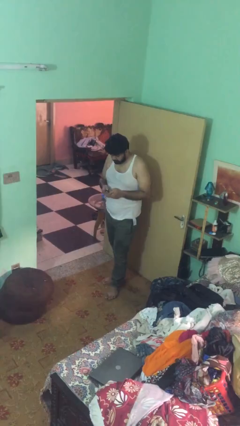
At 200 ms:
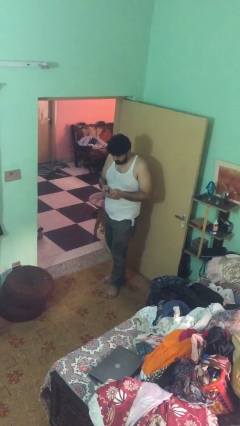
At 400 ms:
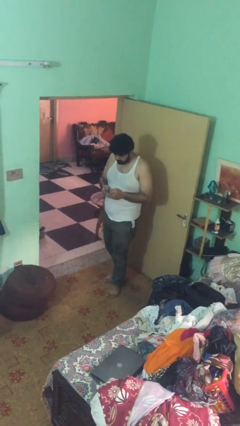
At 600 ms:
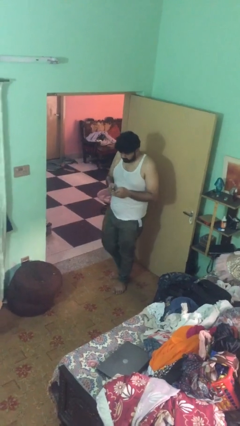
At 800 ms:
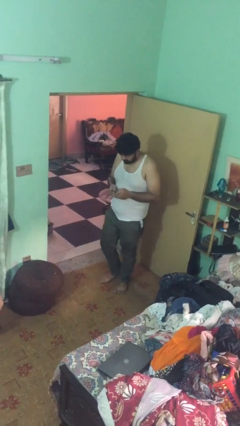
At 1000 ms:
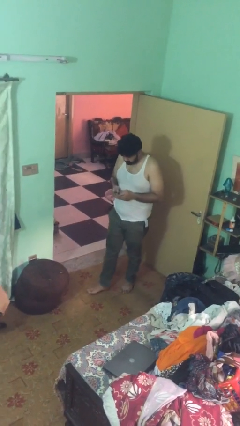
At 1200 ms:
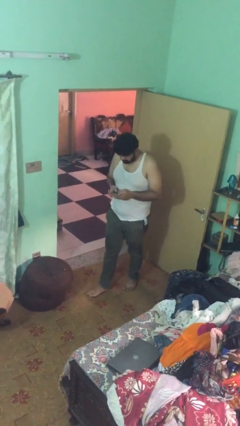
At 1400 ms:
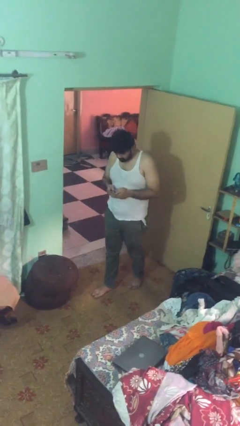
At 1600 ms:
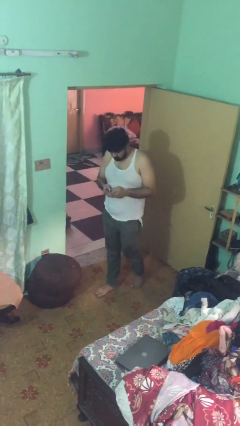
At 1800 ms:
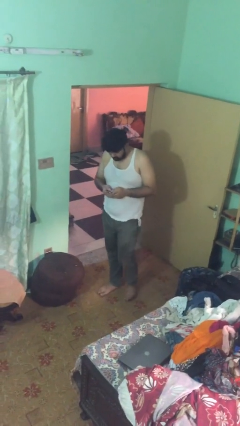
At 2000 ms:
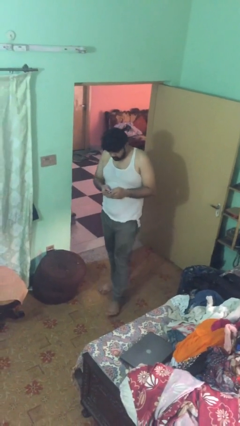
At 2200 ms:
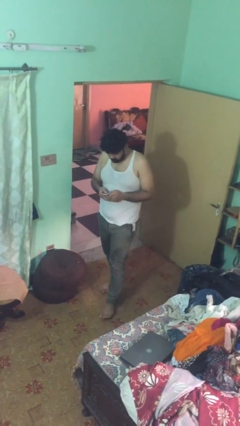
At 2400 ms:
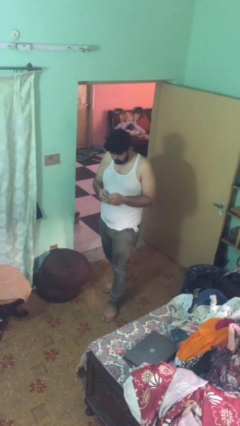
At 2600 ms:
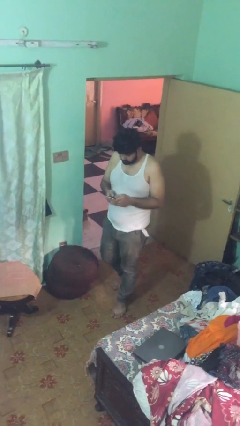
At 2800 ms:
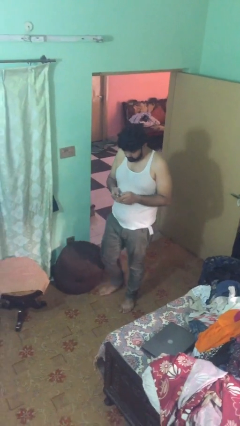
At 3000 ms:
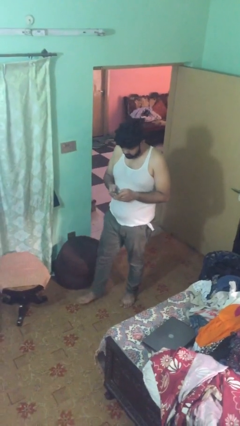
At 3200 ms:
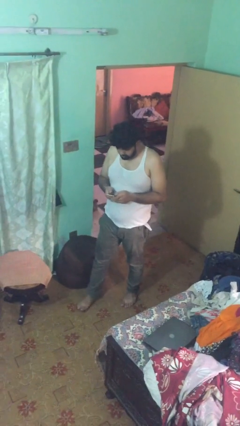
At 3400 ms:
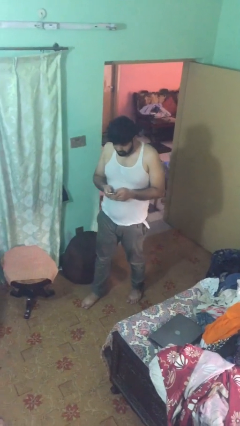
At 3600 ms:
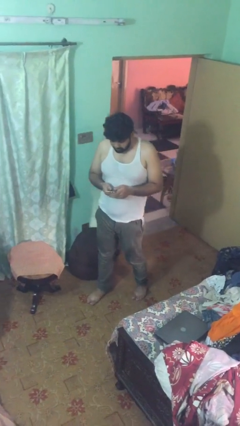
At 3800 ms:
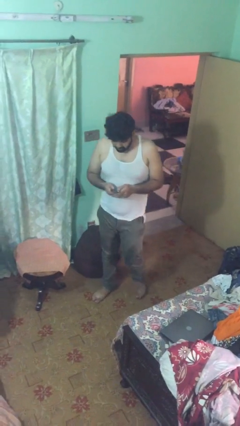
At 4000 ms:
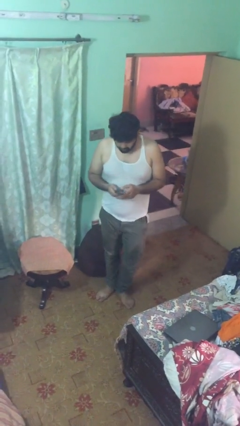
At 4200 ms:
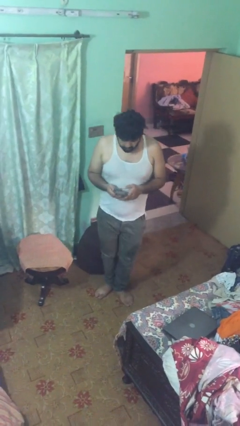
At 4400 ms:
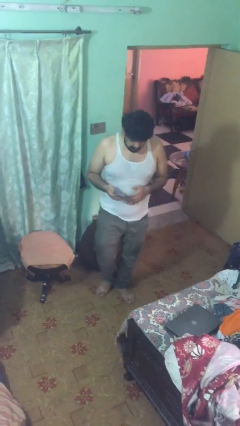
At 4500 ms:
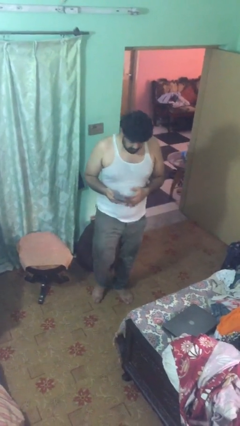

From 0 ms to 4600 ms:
person texts on phone

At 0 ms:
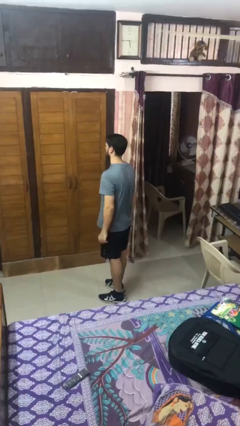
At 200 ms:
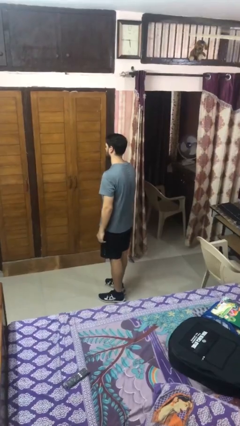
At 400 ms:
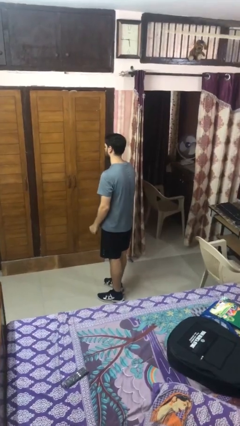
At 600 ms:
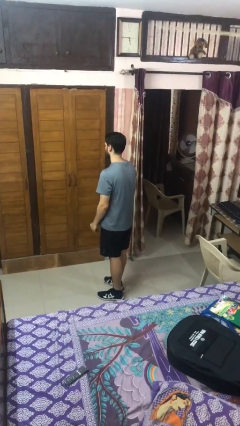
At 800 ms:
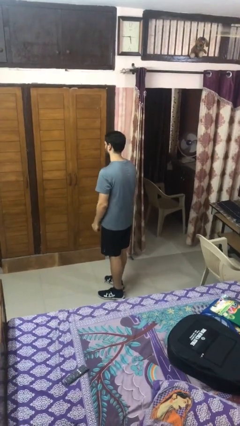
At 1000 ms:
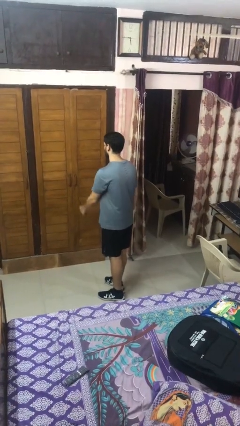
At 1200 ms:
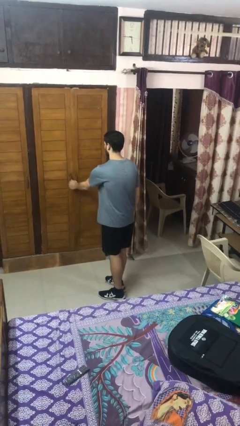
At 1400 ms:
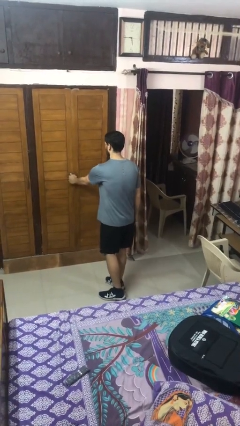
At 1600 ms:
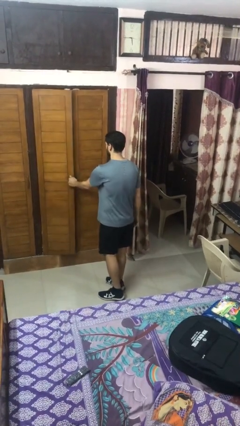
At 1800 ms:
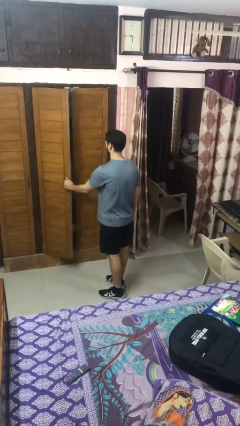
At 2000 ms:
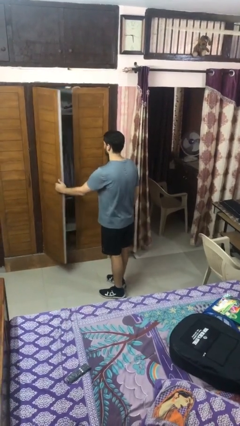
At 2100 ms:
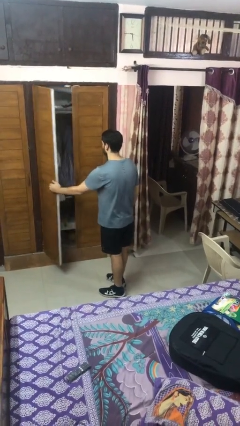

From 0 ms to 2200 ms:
person opens closet door

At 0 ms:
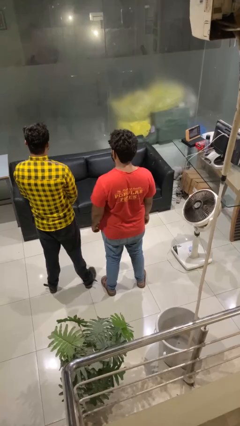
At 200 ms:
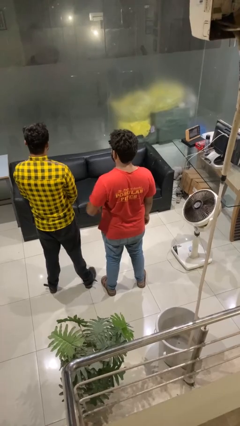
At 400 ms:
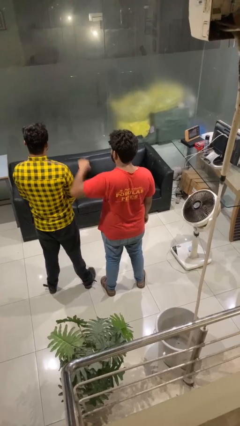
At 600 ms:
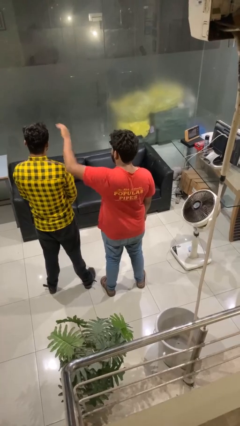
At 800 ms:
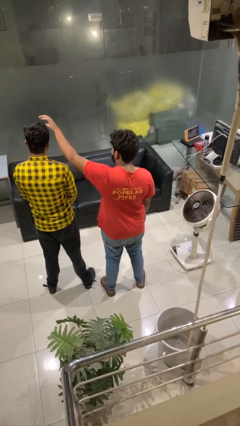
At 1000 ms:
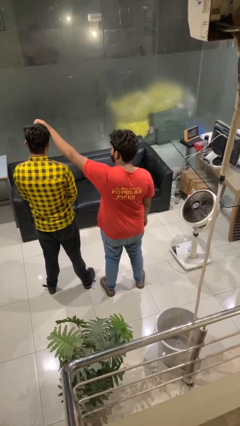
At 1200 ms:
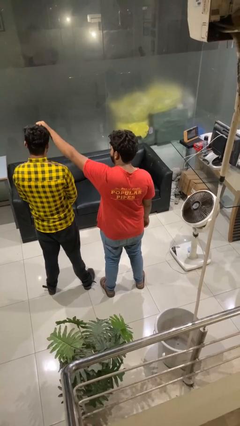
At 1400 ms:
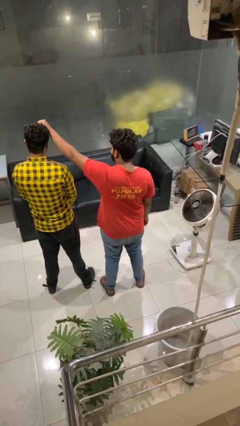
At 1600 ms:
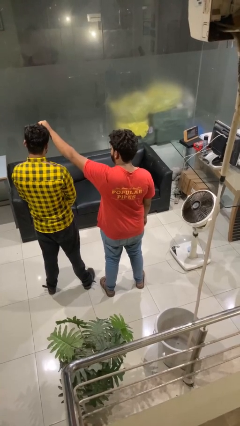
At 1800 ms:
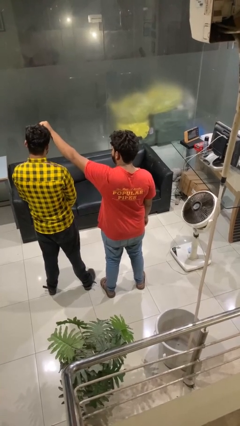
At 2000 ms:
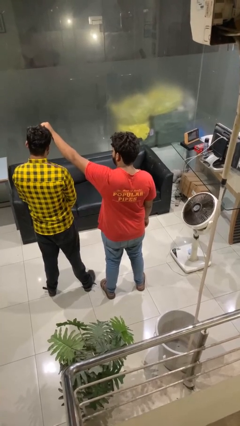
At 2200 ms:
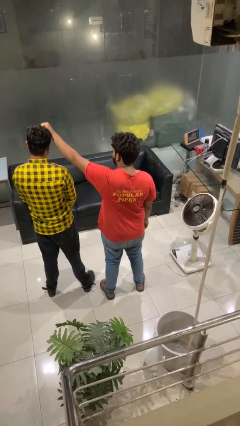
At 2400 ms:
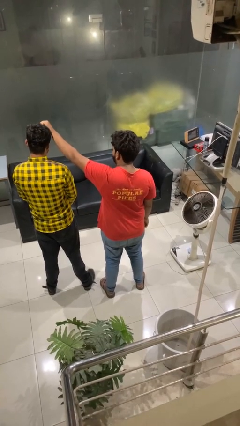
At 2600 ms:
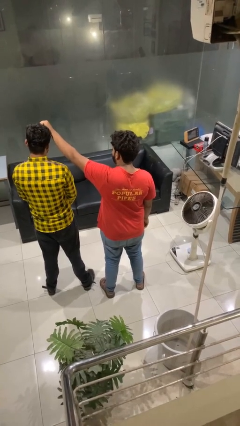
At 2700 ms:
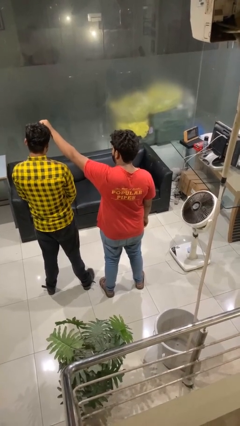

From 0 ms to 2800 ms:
person grabs person by hair

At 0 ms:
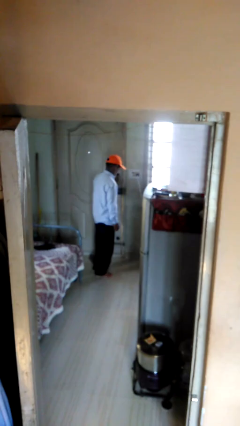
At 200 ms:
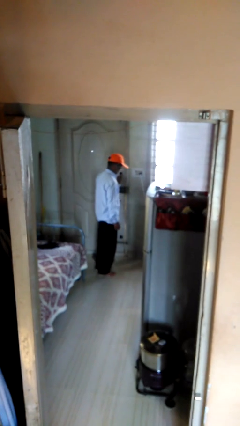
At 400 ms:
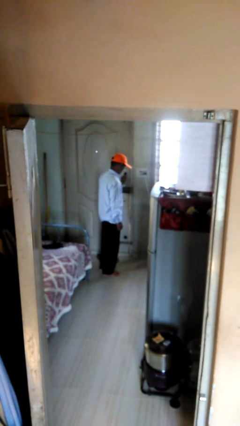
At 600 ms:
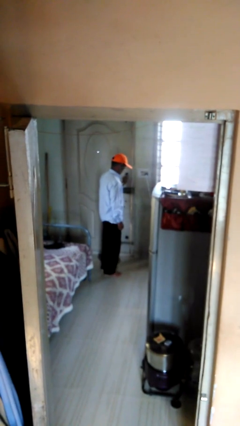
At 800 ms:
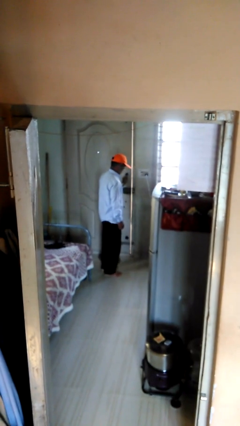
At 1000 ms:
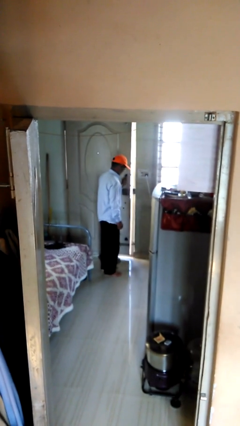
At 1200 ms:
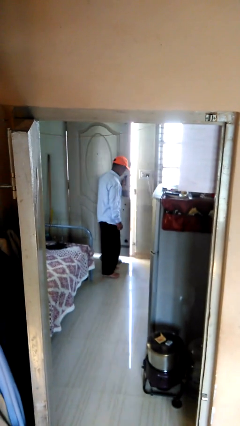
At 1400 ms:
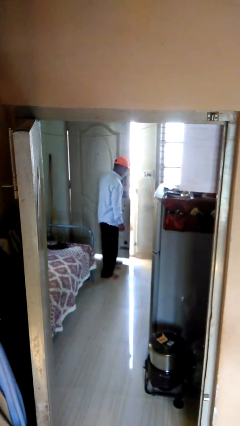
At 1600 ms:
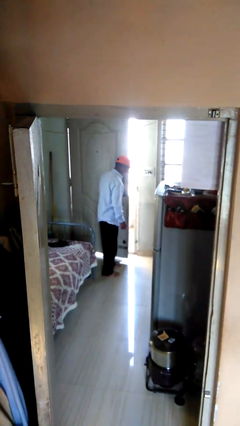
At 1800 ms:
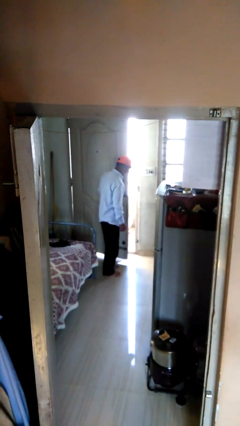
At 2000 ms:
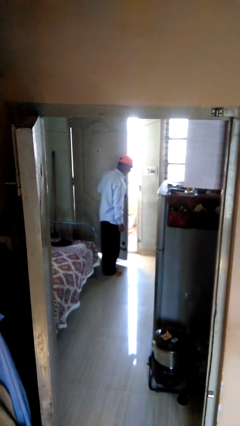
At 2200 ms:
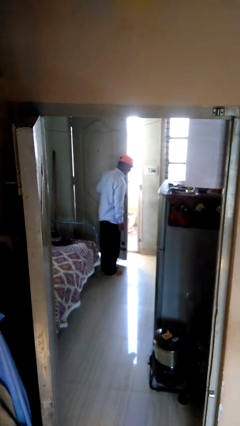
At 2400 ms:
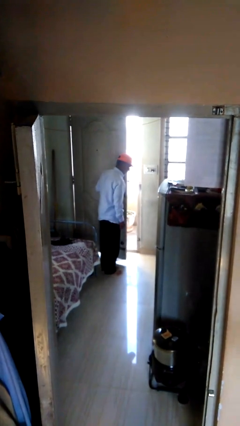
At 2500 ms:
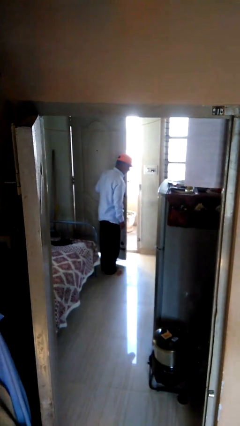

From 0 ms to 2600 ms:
person opens facility door

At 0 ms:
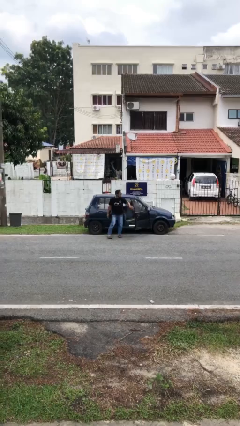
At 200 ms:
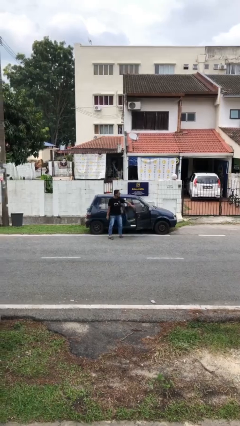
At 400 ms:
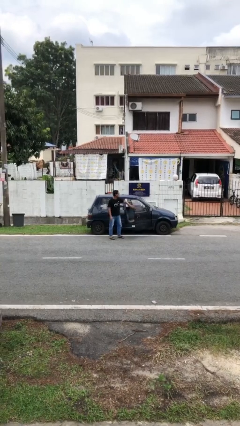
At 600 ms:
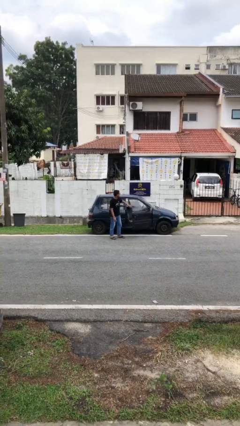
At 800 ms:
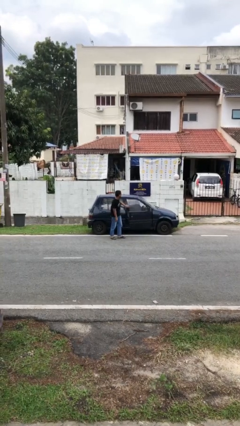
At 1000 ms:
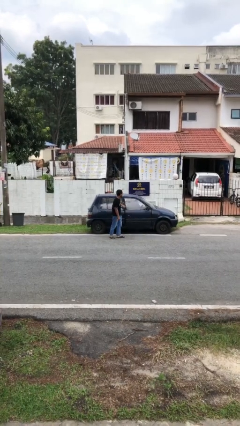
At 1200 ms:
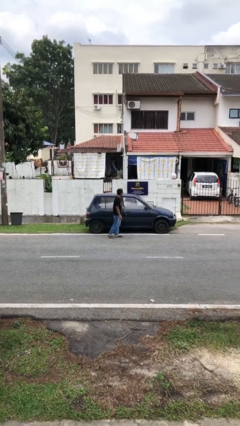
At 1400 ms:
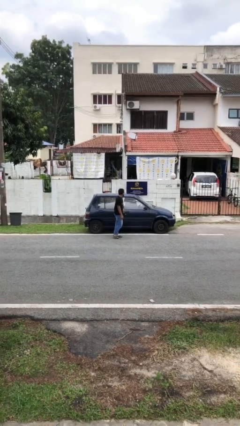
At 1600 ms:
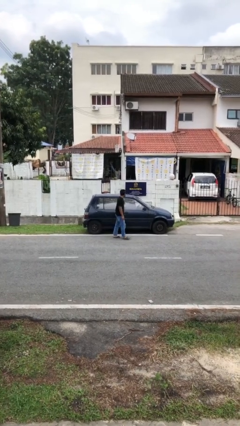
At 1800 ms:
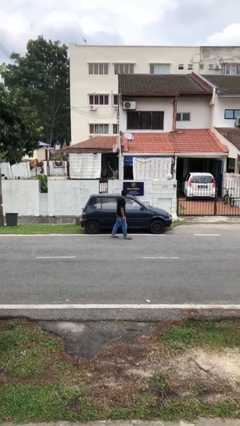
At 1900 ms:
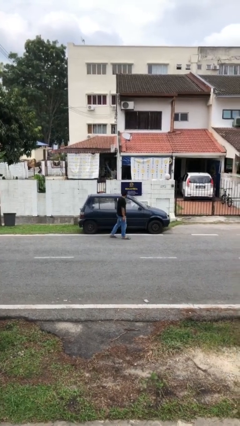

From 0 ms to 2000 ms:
person closes car door

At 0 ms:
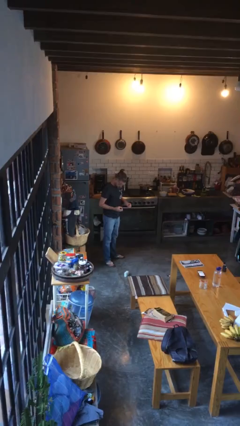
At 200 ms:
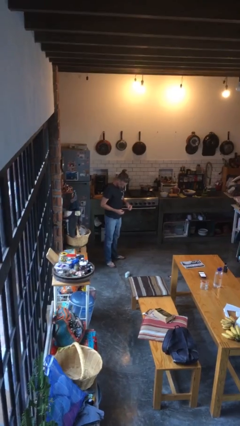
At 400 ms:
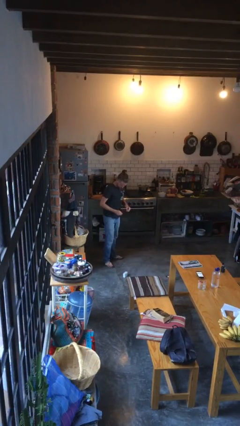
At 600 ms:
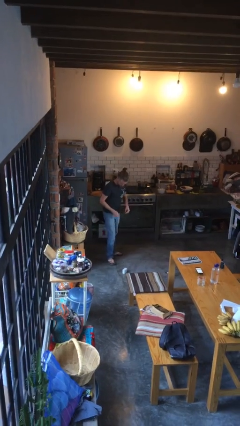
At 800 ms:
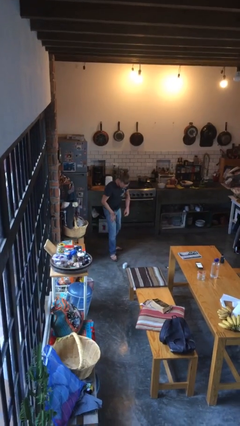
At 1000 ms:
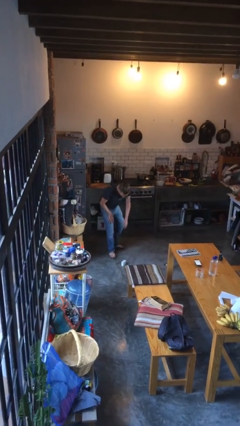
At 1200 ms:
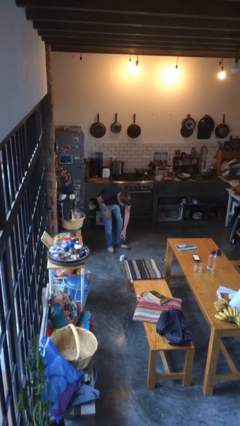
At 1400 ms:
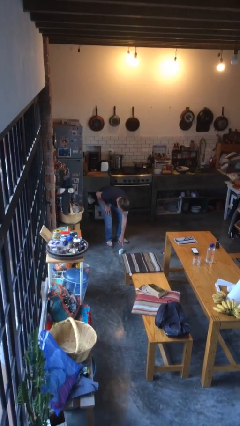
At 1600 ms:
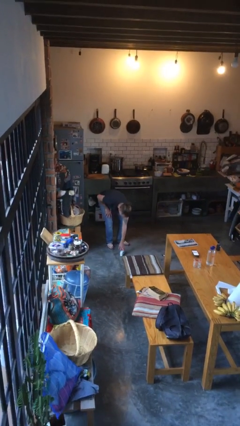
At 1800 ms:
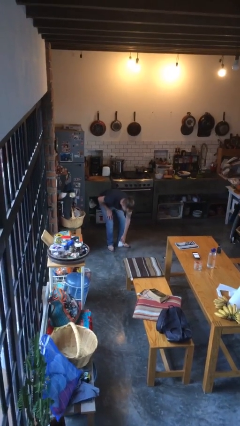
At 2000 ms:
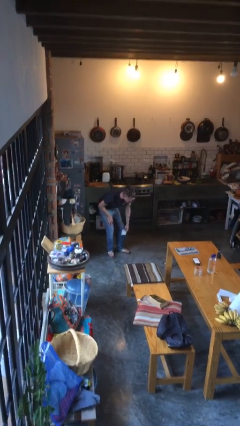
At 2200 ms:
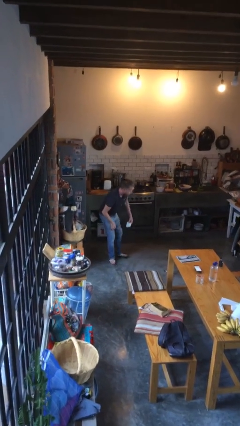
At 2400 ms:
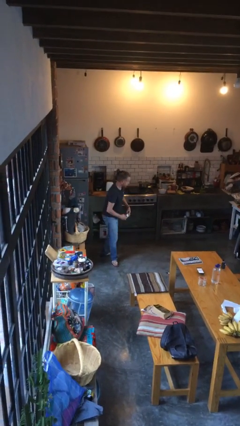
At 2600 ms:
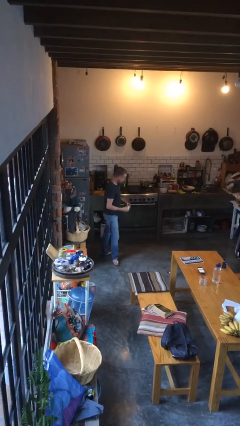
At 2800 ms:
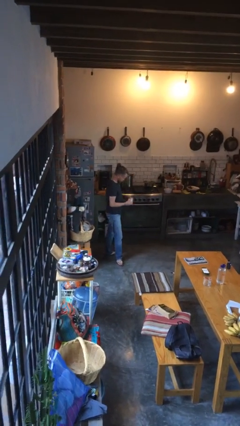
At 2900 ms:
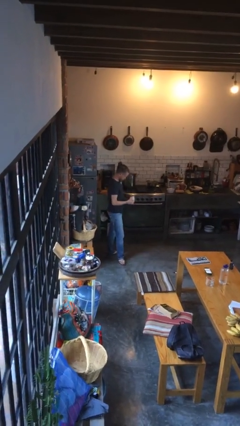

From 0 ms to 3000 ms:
person picks up object from floor

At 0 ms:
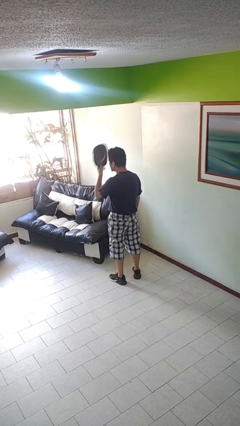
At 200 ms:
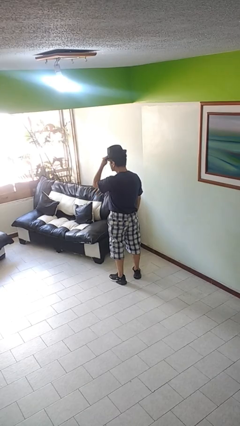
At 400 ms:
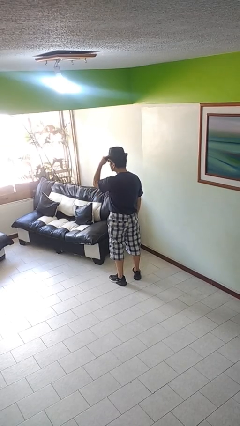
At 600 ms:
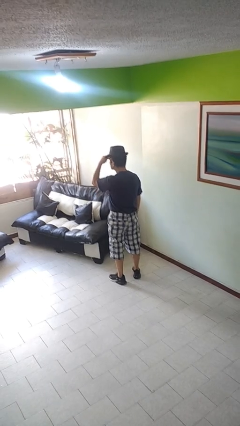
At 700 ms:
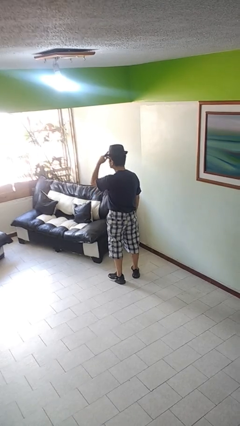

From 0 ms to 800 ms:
person puts on hat
